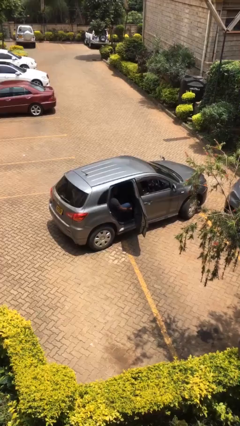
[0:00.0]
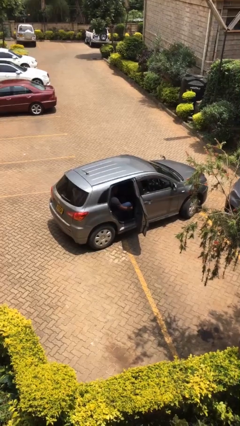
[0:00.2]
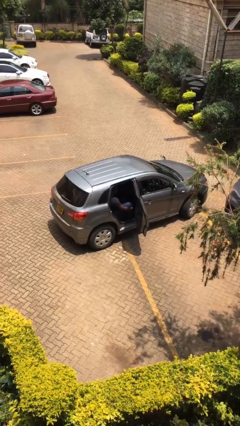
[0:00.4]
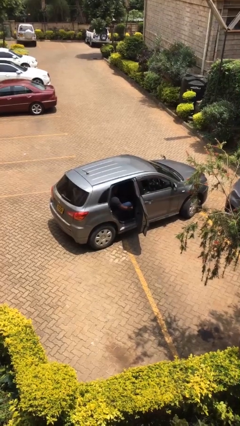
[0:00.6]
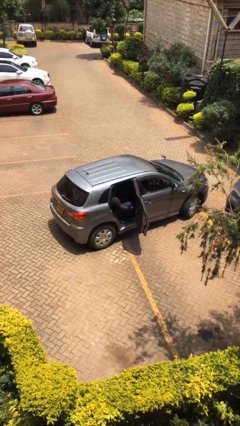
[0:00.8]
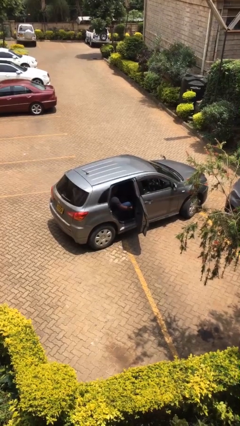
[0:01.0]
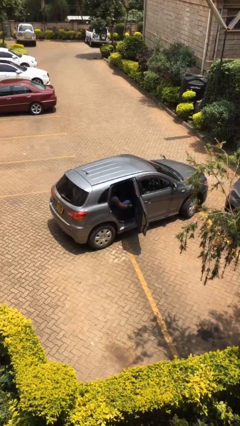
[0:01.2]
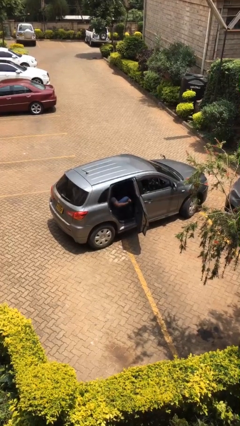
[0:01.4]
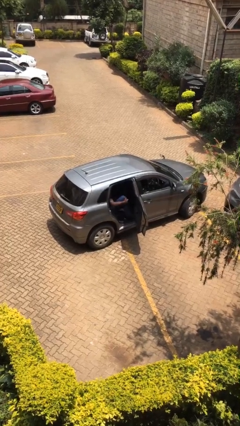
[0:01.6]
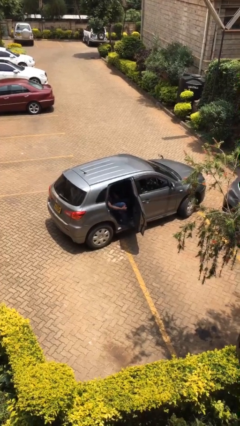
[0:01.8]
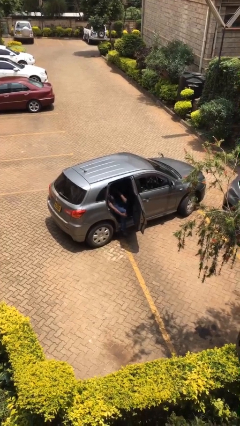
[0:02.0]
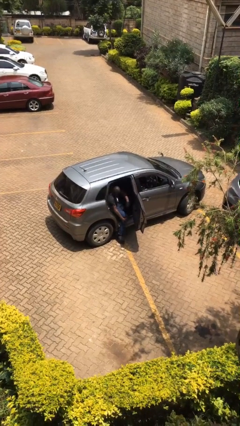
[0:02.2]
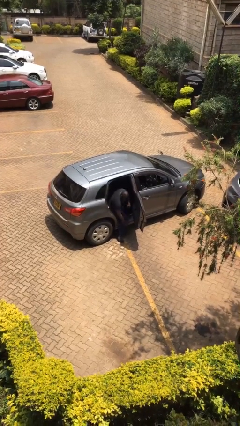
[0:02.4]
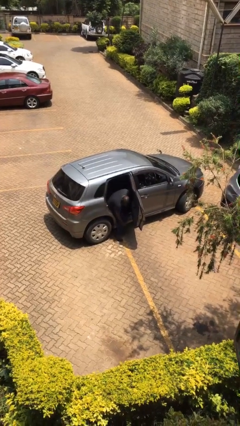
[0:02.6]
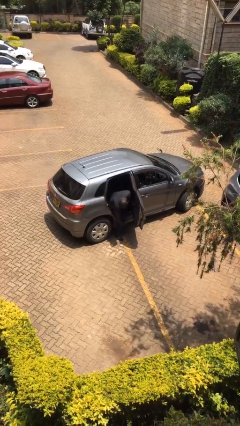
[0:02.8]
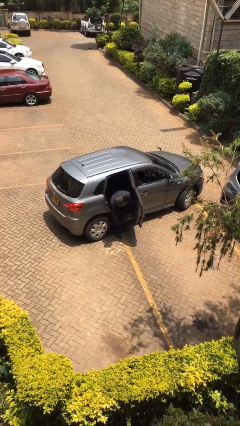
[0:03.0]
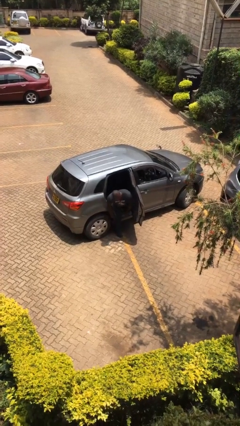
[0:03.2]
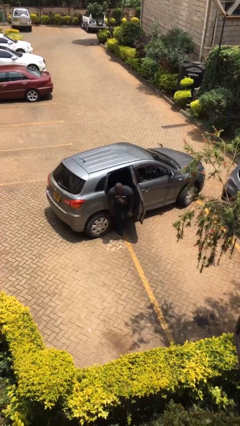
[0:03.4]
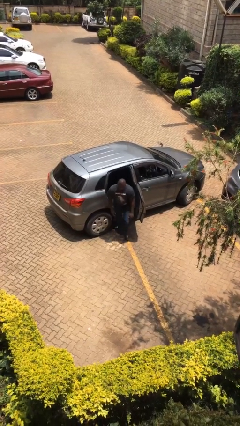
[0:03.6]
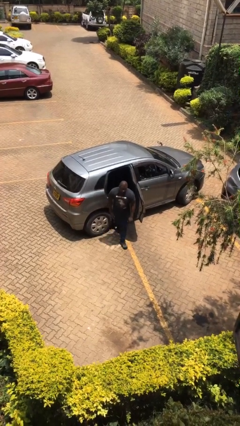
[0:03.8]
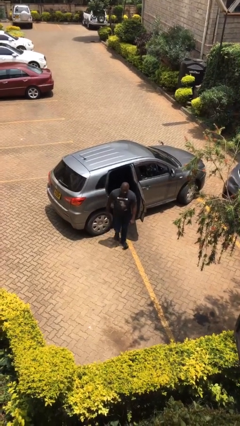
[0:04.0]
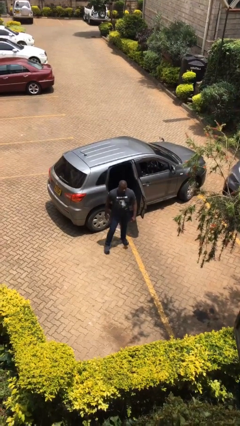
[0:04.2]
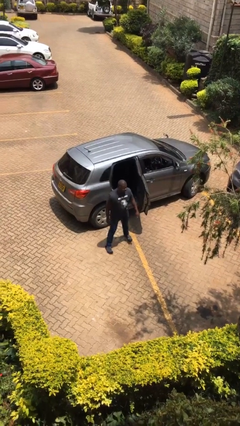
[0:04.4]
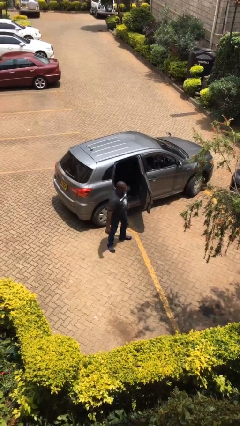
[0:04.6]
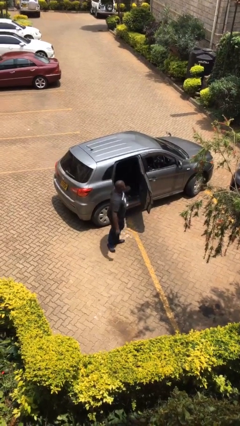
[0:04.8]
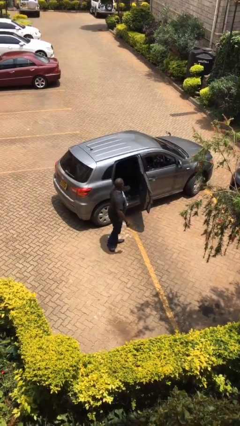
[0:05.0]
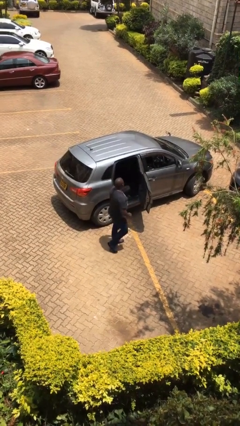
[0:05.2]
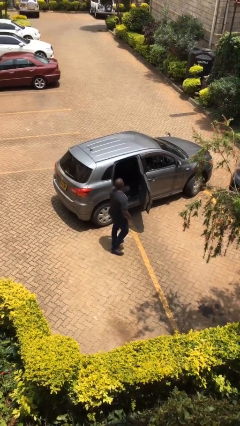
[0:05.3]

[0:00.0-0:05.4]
person exits car

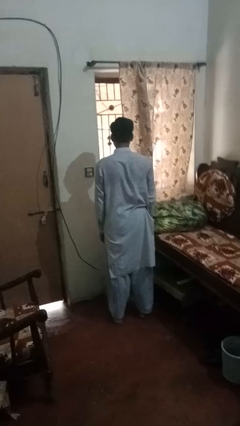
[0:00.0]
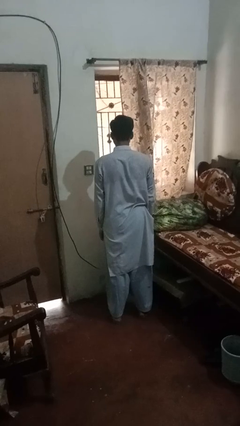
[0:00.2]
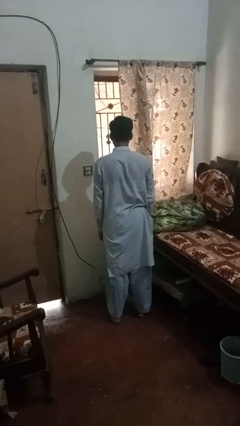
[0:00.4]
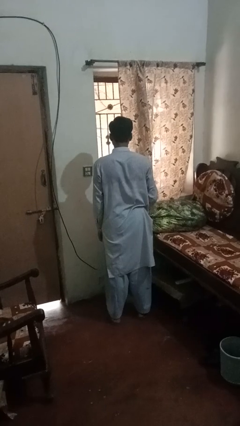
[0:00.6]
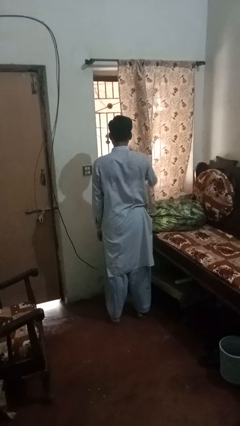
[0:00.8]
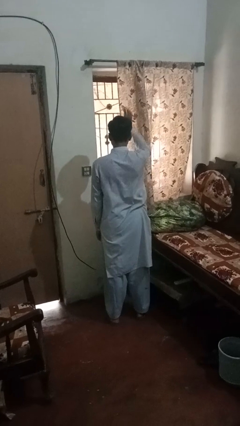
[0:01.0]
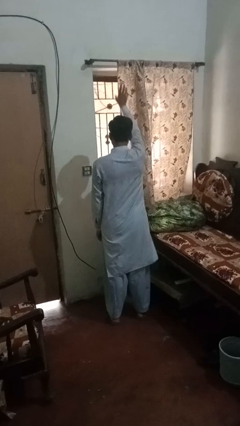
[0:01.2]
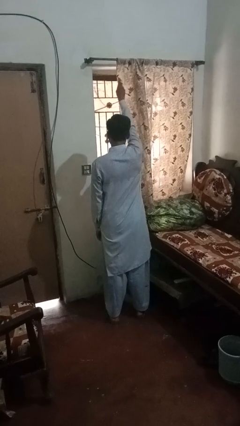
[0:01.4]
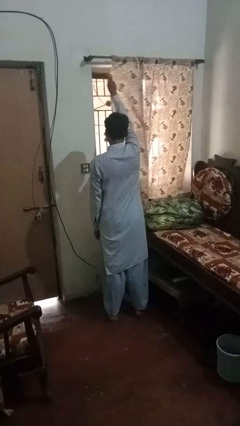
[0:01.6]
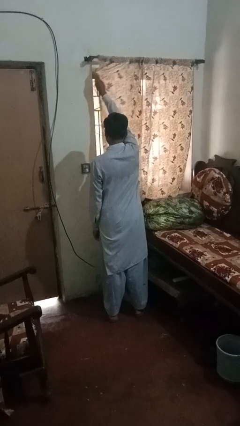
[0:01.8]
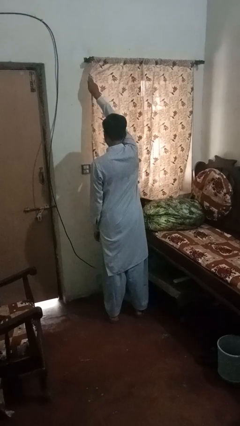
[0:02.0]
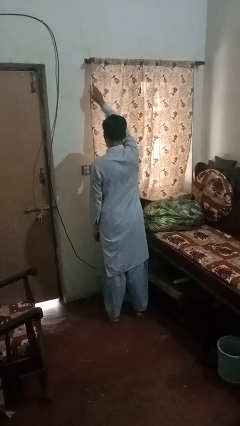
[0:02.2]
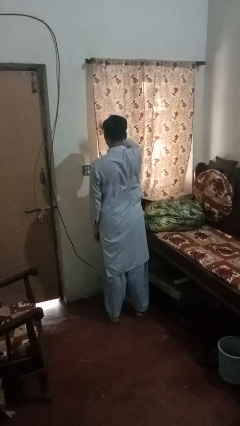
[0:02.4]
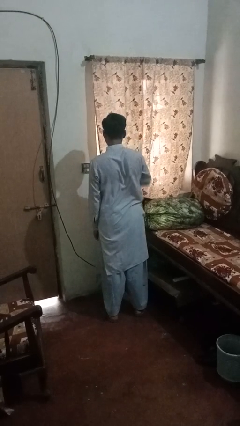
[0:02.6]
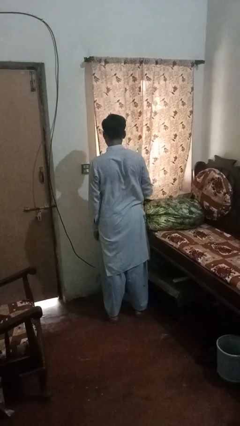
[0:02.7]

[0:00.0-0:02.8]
person closes curtains

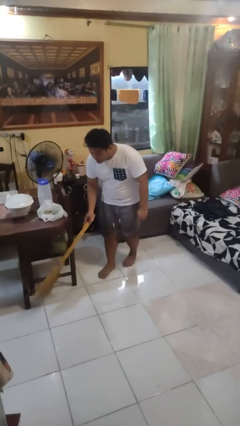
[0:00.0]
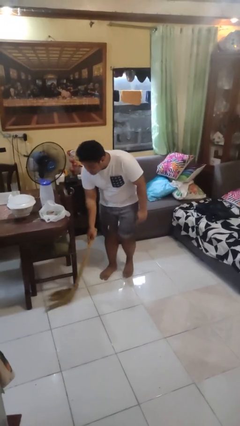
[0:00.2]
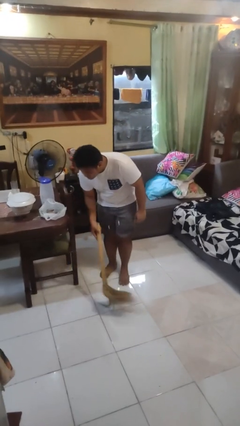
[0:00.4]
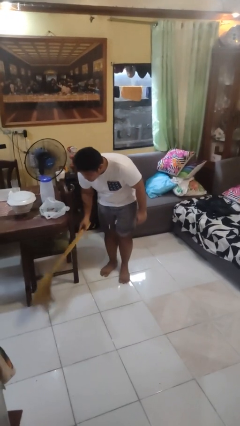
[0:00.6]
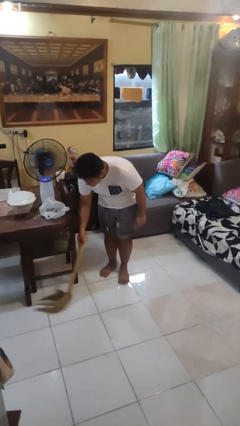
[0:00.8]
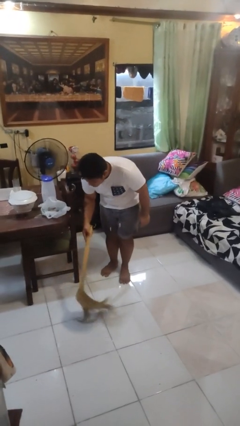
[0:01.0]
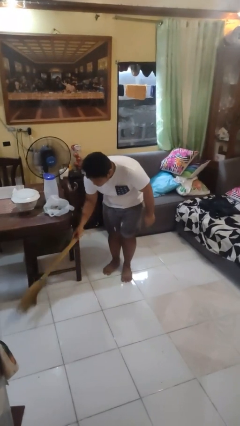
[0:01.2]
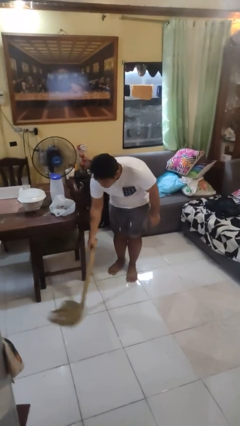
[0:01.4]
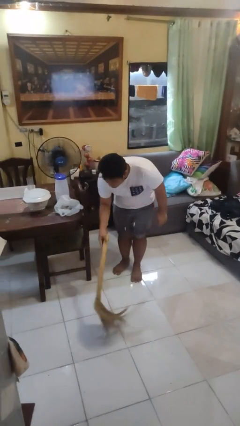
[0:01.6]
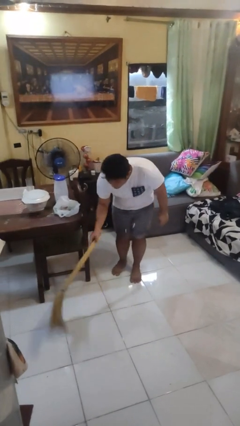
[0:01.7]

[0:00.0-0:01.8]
person sweeps floor

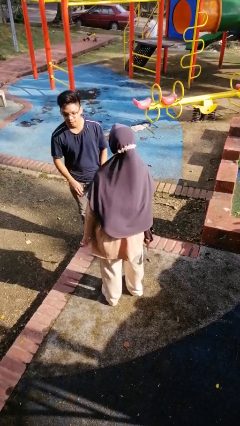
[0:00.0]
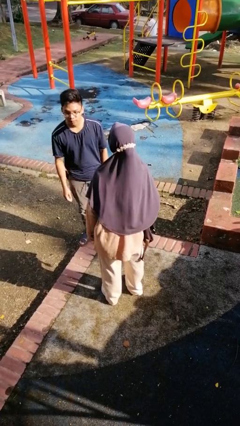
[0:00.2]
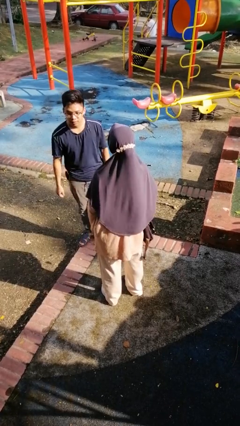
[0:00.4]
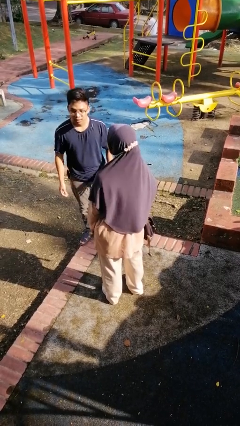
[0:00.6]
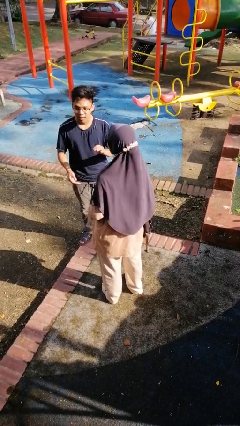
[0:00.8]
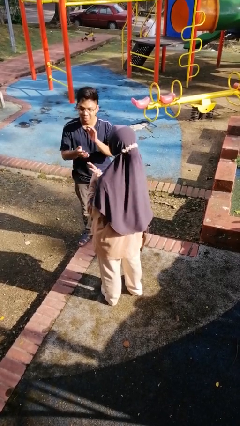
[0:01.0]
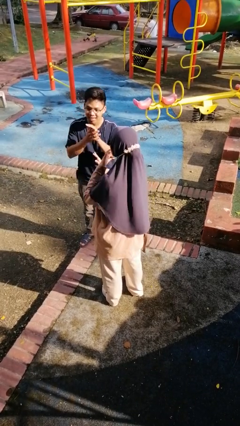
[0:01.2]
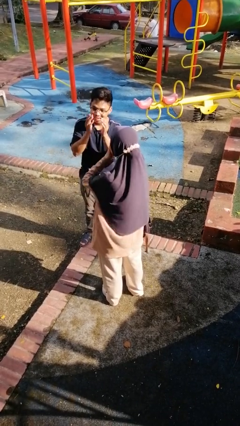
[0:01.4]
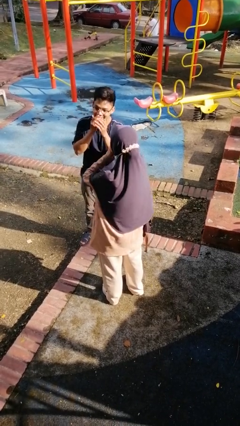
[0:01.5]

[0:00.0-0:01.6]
person laughs with person

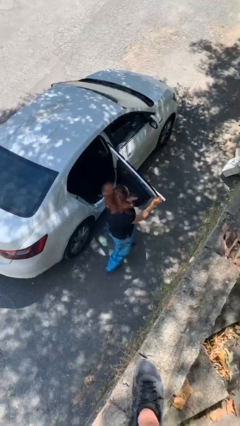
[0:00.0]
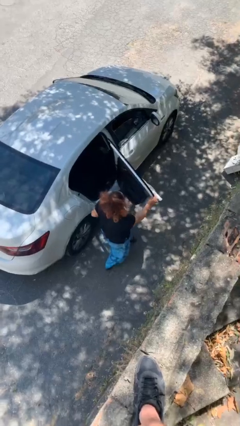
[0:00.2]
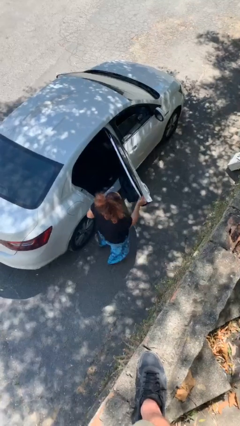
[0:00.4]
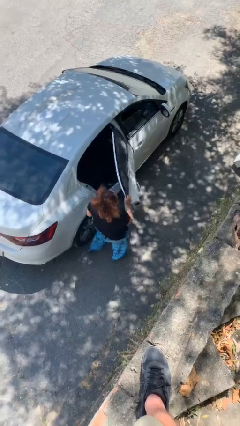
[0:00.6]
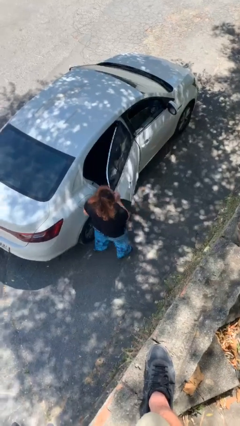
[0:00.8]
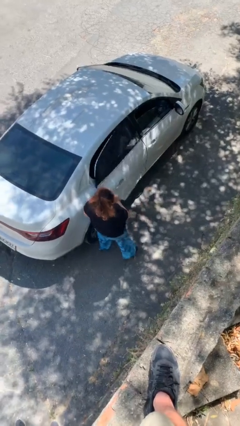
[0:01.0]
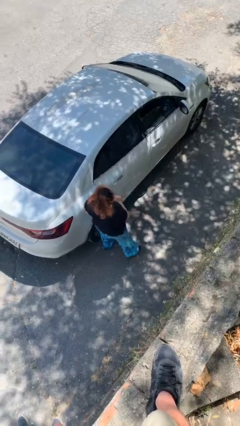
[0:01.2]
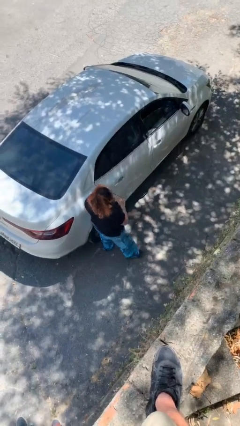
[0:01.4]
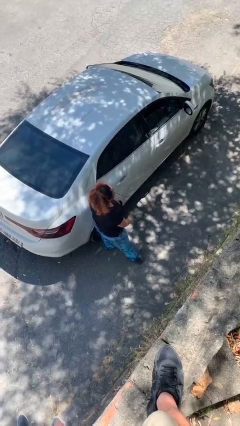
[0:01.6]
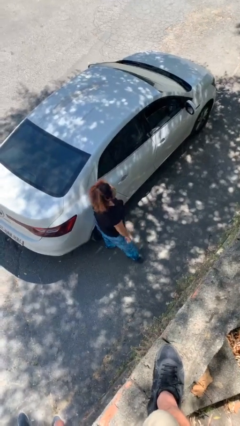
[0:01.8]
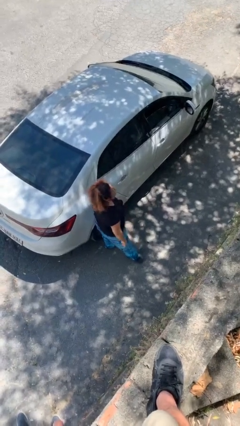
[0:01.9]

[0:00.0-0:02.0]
person closes car door

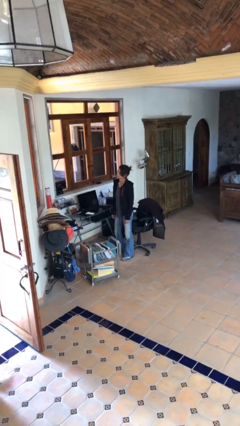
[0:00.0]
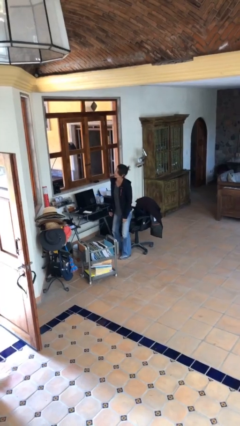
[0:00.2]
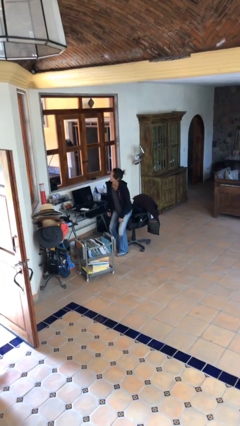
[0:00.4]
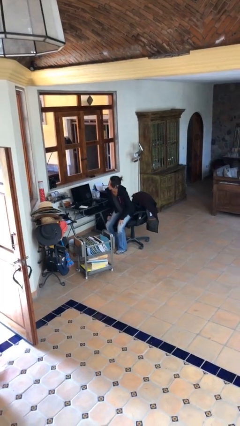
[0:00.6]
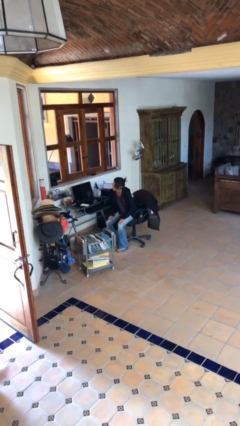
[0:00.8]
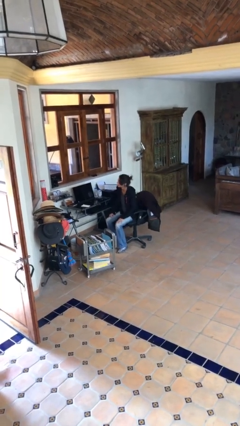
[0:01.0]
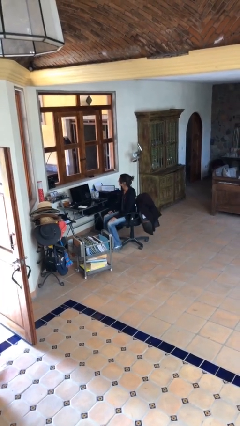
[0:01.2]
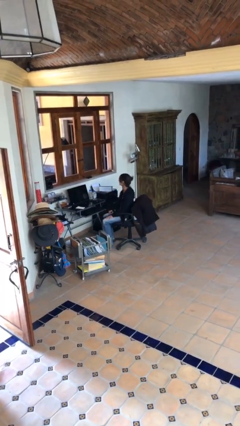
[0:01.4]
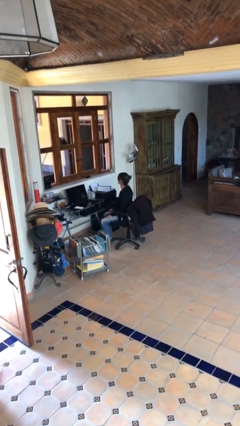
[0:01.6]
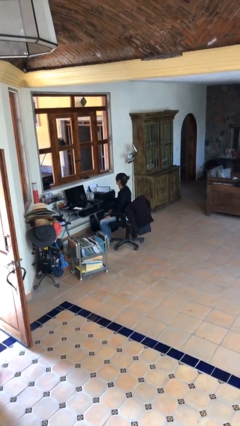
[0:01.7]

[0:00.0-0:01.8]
person sits down

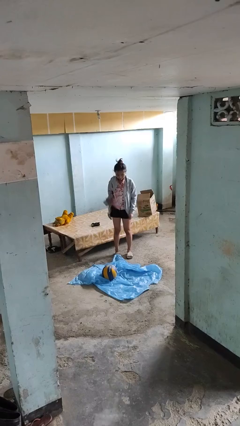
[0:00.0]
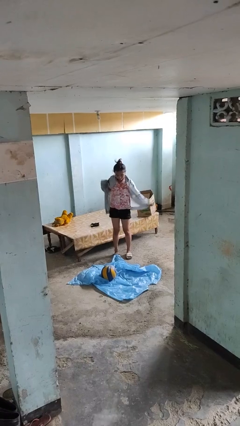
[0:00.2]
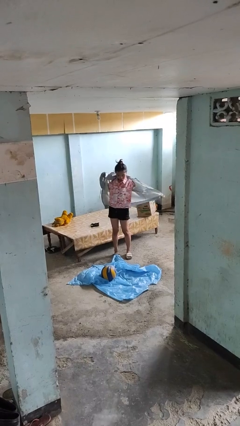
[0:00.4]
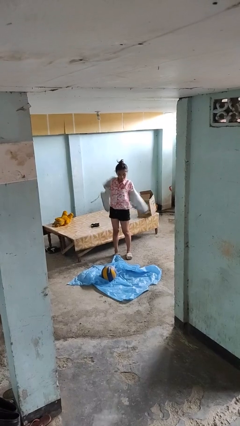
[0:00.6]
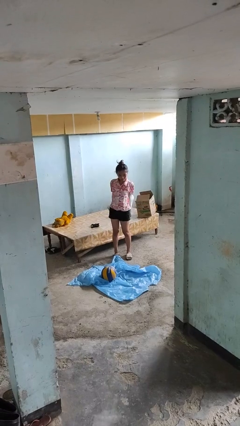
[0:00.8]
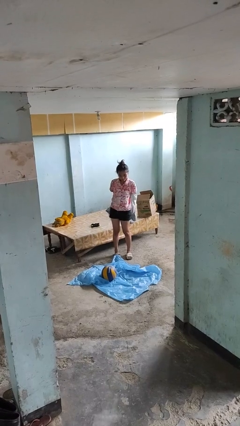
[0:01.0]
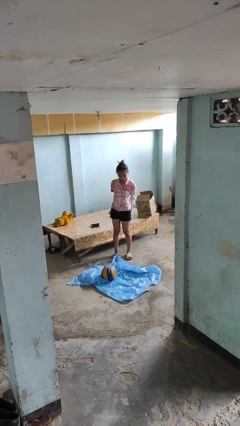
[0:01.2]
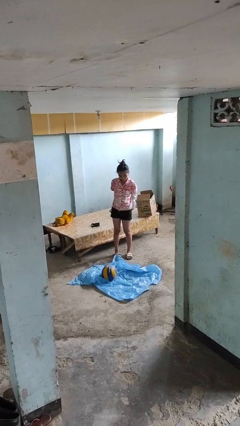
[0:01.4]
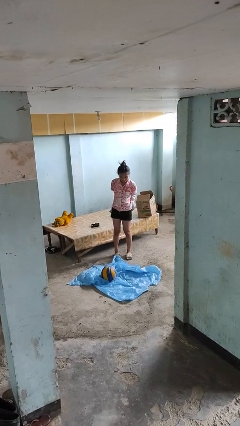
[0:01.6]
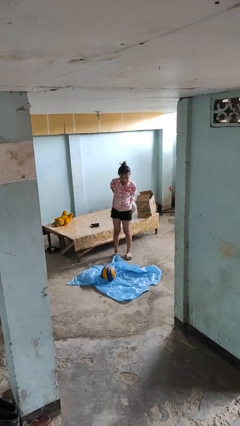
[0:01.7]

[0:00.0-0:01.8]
person takes off jacket
